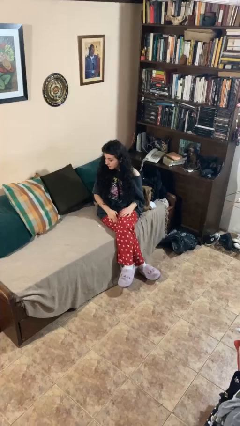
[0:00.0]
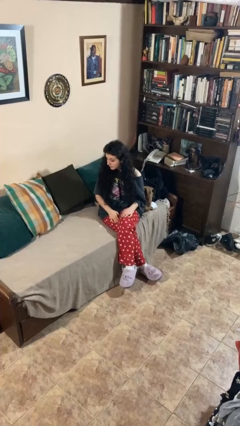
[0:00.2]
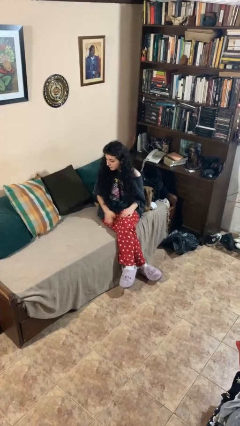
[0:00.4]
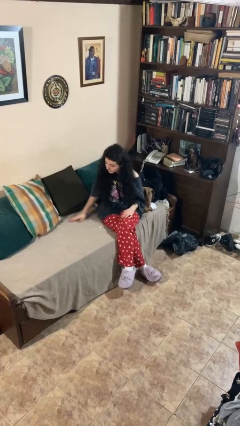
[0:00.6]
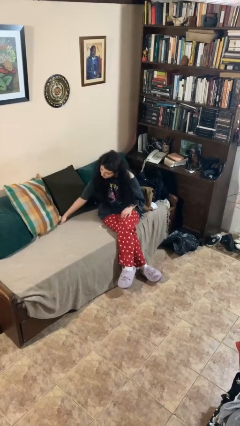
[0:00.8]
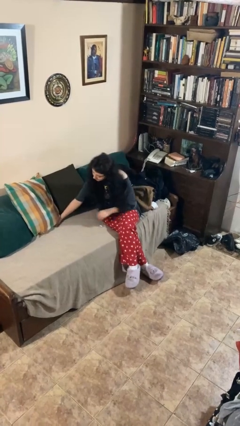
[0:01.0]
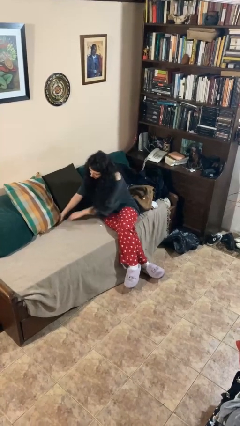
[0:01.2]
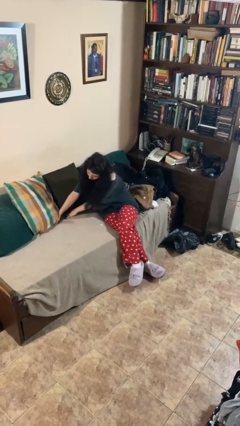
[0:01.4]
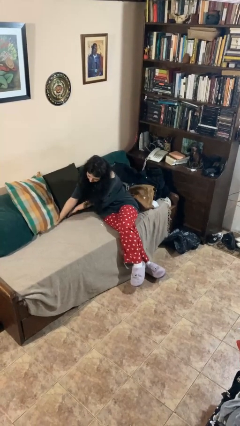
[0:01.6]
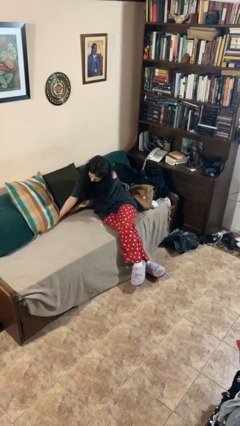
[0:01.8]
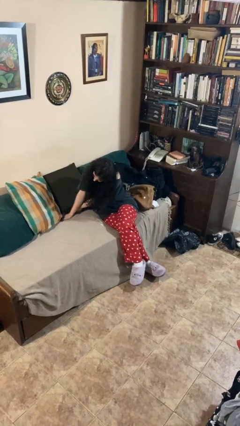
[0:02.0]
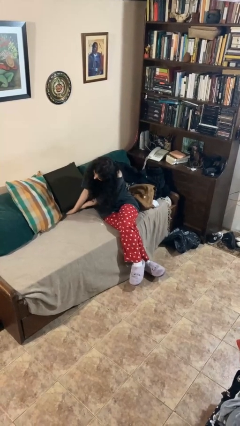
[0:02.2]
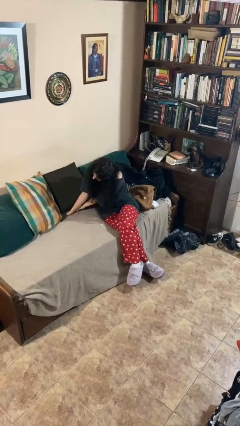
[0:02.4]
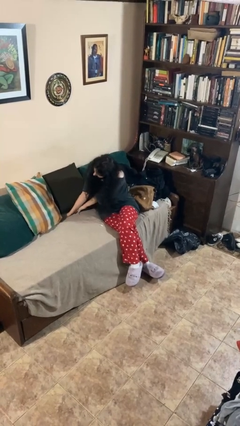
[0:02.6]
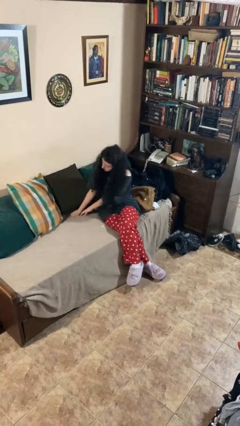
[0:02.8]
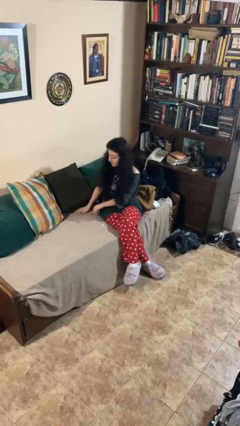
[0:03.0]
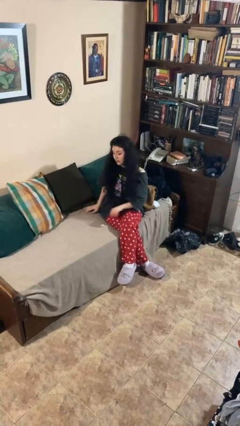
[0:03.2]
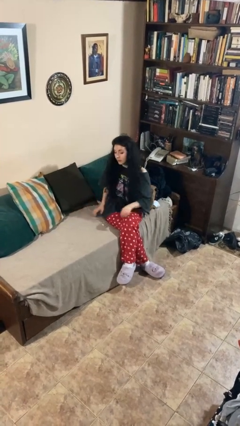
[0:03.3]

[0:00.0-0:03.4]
person searches in couch

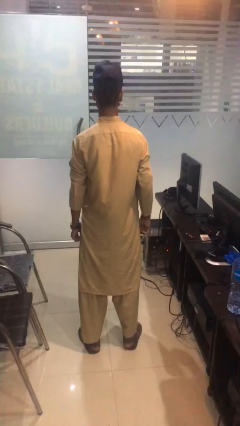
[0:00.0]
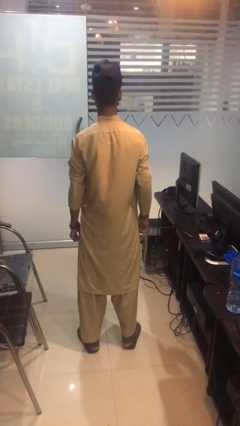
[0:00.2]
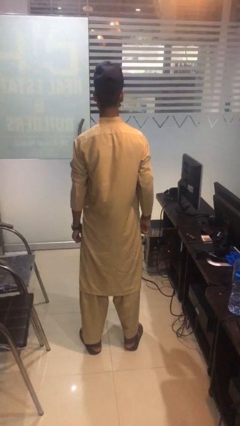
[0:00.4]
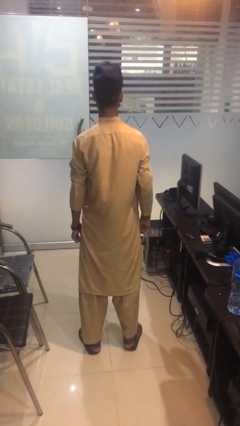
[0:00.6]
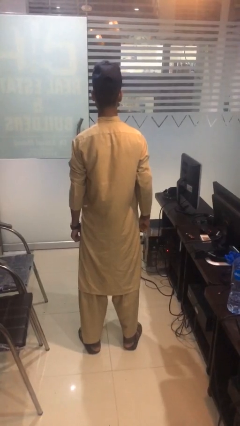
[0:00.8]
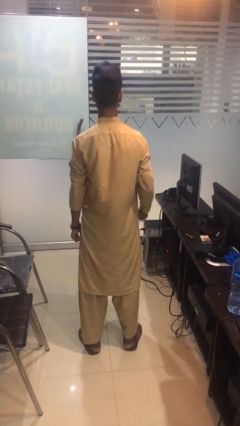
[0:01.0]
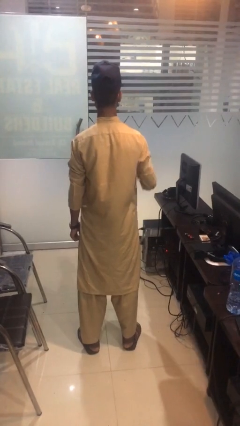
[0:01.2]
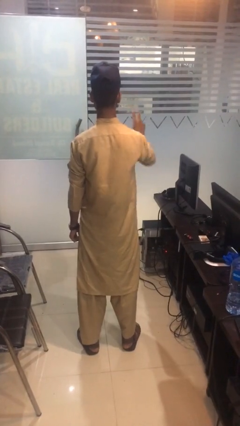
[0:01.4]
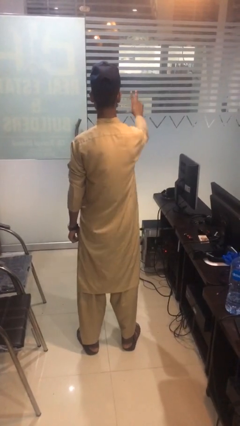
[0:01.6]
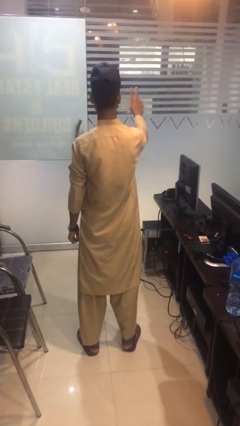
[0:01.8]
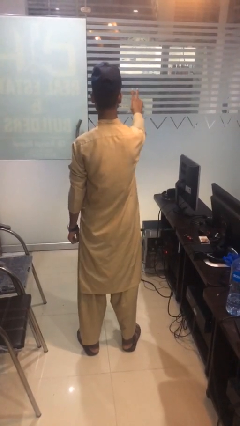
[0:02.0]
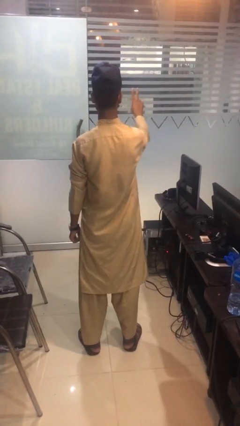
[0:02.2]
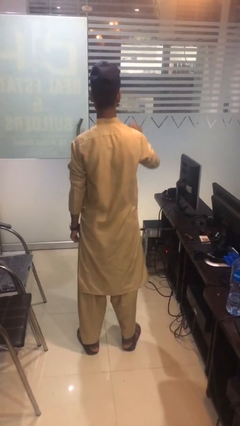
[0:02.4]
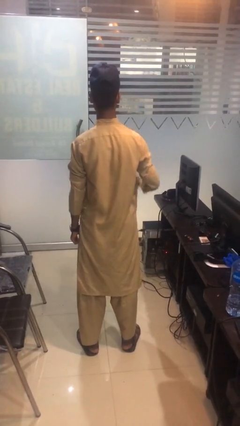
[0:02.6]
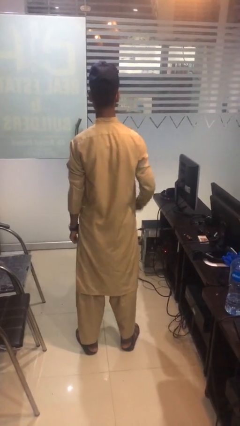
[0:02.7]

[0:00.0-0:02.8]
person gestures peace

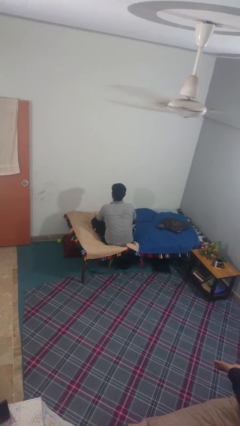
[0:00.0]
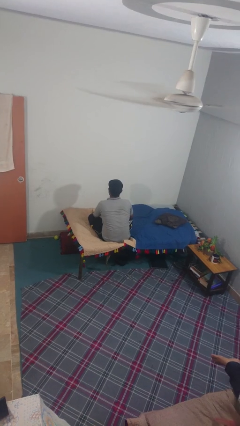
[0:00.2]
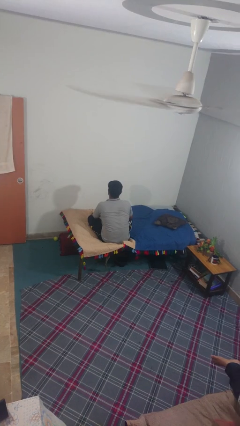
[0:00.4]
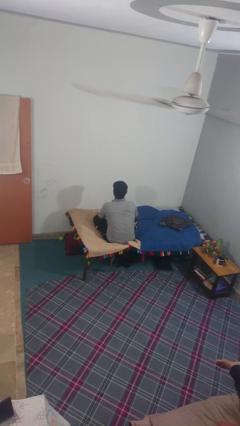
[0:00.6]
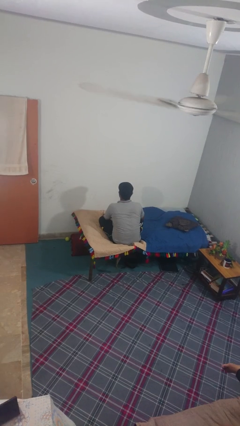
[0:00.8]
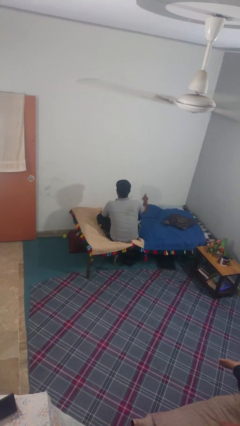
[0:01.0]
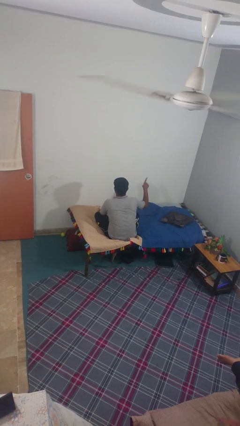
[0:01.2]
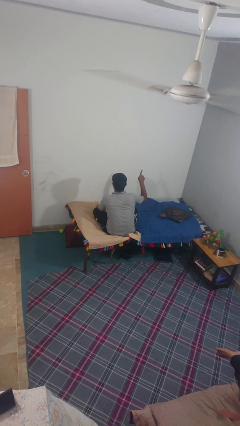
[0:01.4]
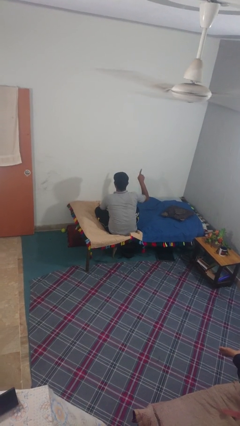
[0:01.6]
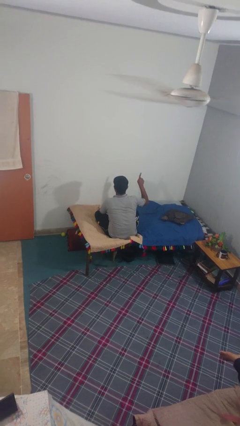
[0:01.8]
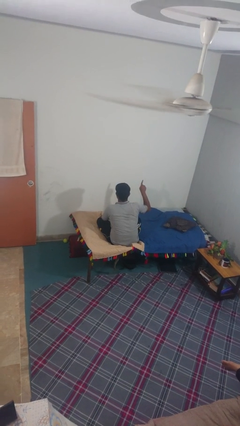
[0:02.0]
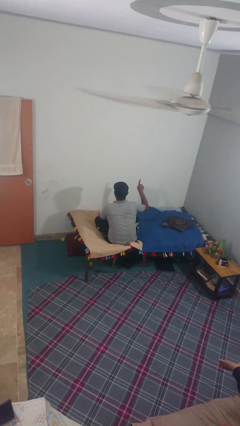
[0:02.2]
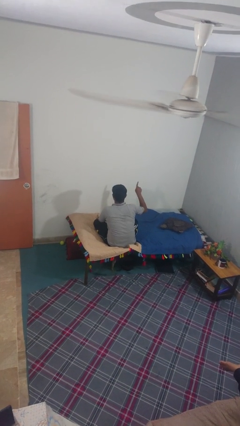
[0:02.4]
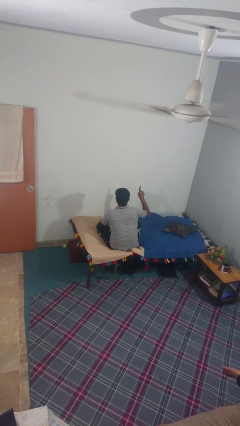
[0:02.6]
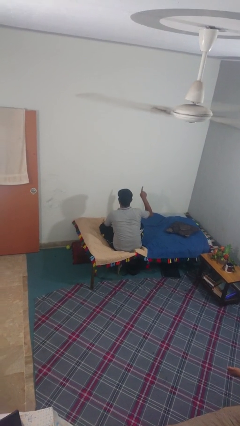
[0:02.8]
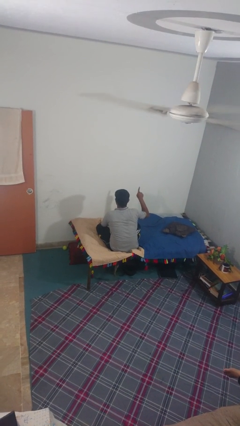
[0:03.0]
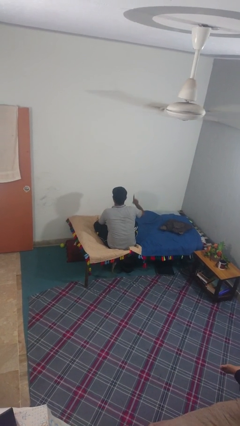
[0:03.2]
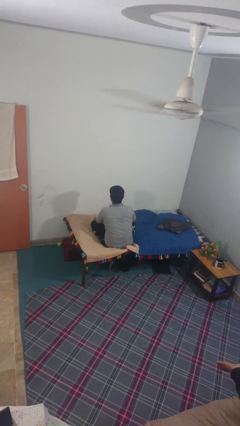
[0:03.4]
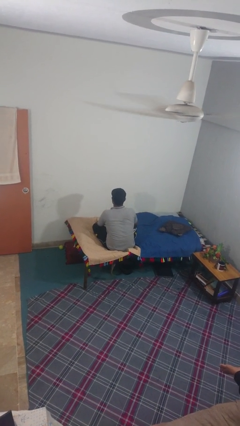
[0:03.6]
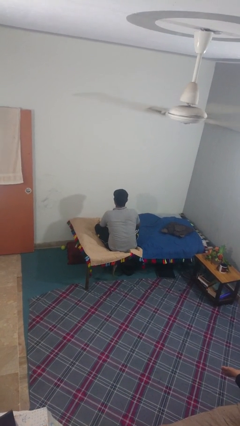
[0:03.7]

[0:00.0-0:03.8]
person gestures number one

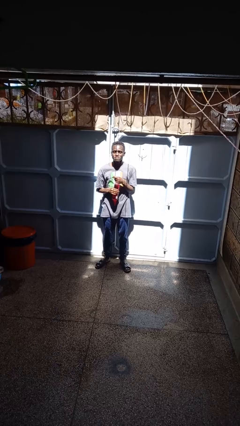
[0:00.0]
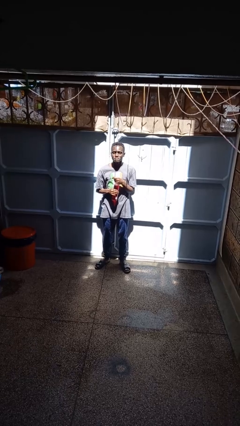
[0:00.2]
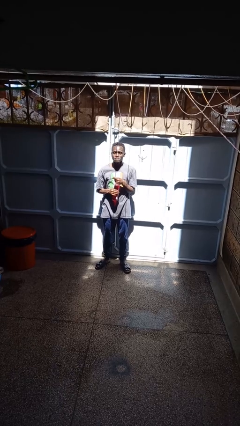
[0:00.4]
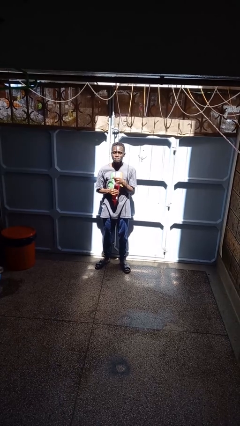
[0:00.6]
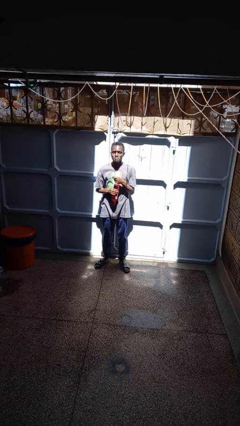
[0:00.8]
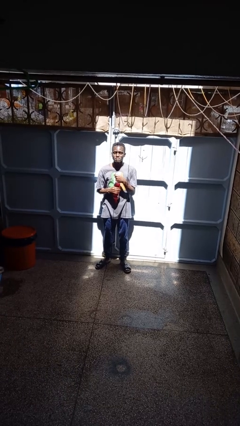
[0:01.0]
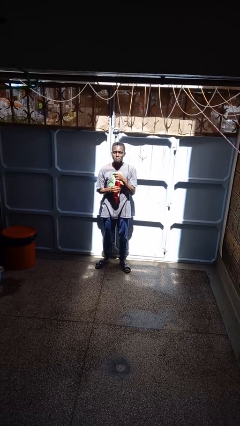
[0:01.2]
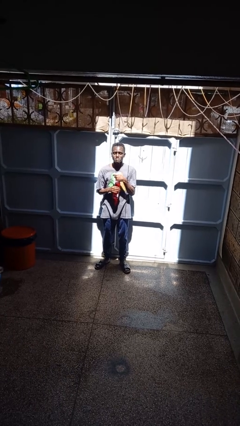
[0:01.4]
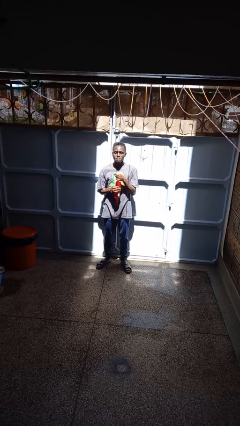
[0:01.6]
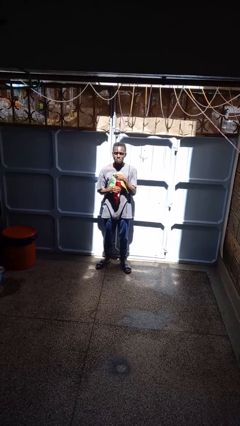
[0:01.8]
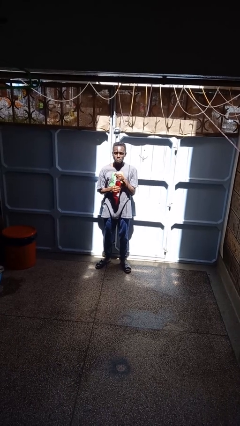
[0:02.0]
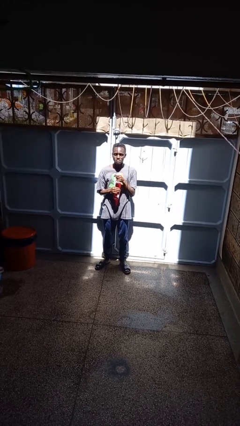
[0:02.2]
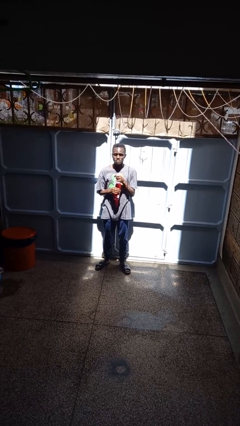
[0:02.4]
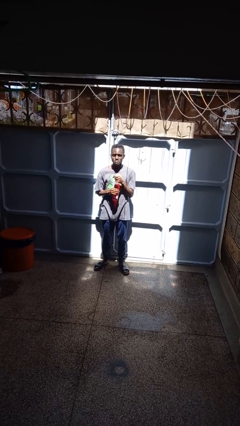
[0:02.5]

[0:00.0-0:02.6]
person opens beverage can

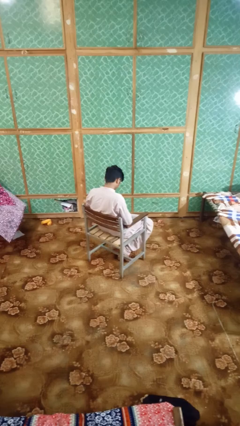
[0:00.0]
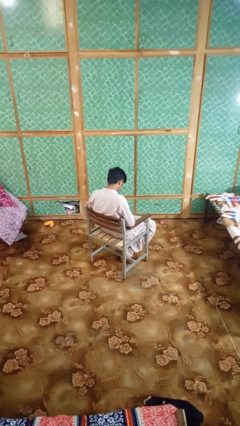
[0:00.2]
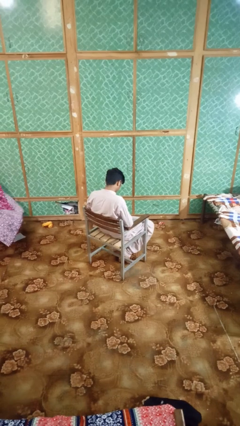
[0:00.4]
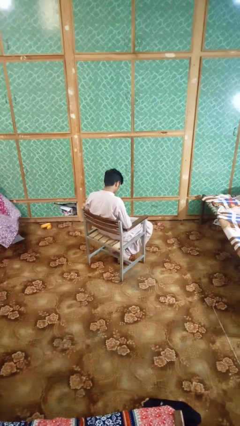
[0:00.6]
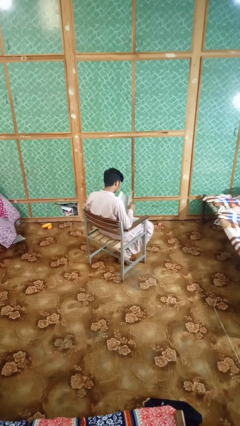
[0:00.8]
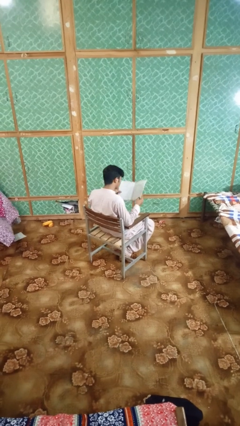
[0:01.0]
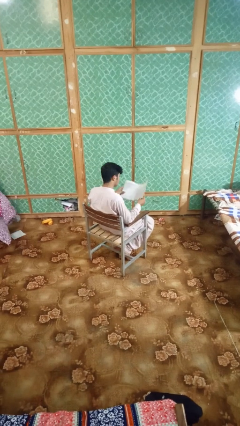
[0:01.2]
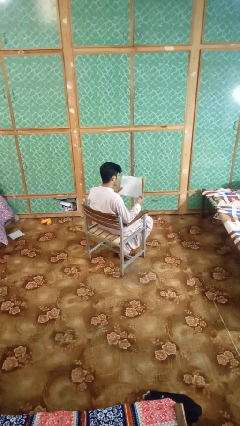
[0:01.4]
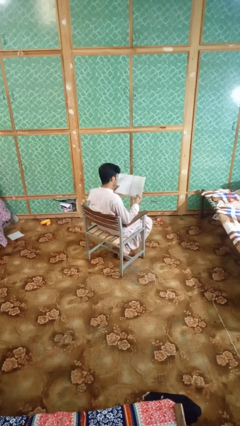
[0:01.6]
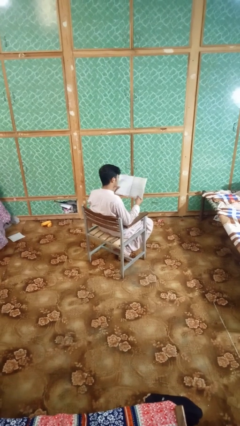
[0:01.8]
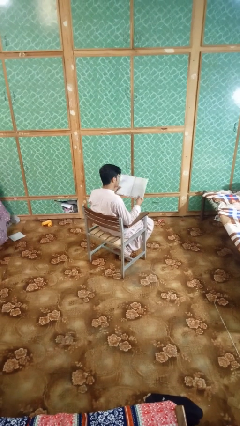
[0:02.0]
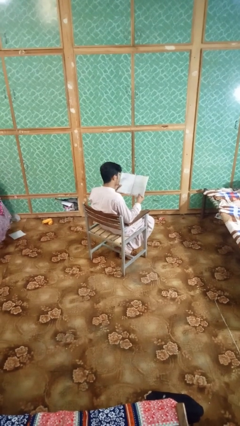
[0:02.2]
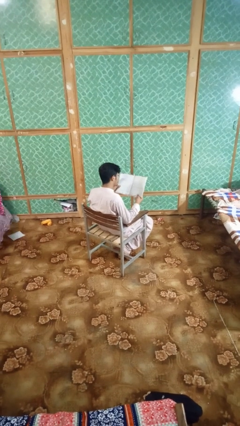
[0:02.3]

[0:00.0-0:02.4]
person reads book

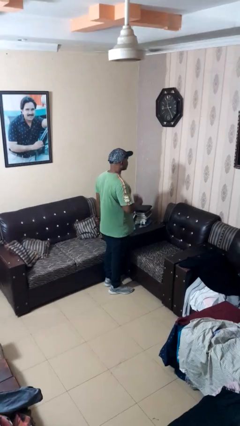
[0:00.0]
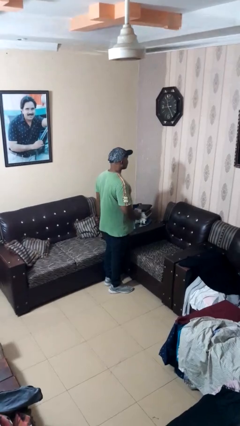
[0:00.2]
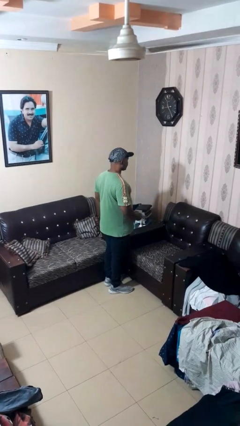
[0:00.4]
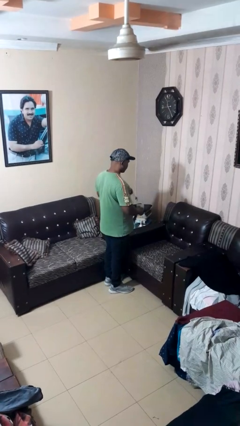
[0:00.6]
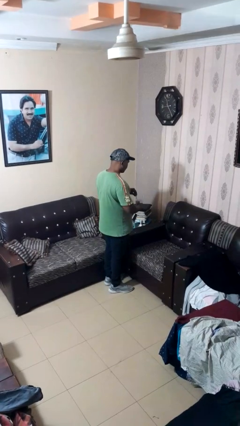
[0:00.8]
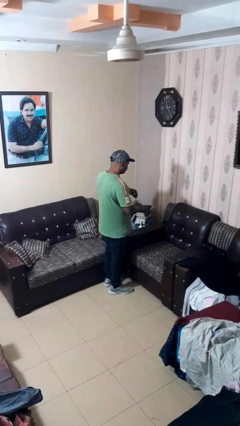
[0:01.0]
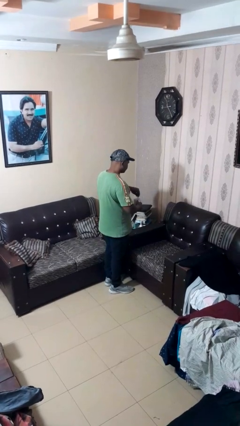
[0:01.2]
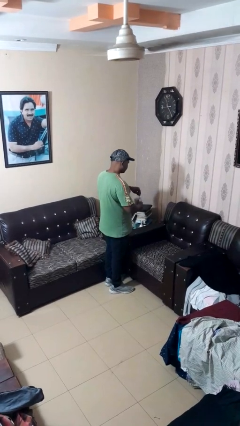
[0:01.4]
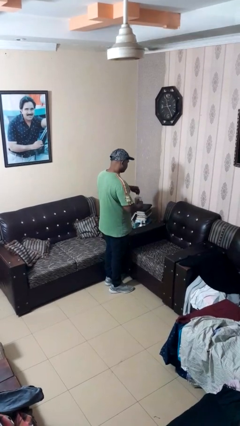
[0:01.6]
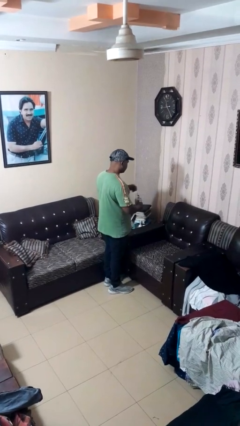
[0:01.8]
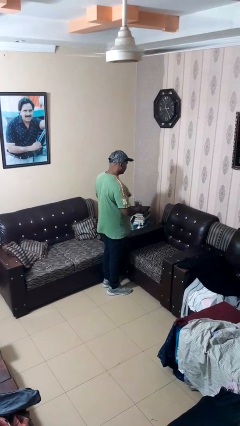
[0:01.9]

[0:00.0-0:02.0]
person stirs mug

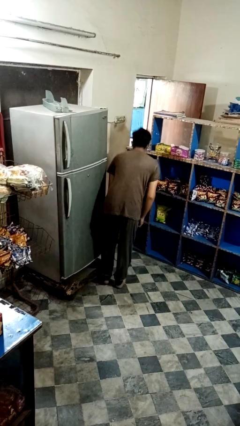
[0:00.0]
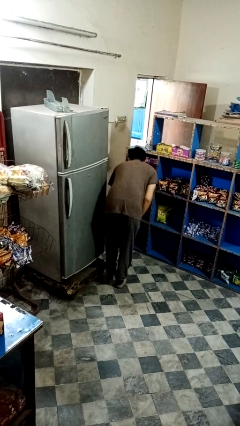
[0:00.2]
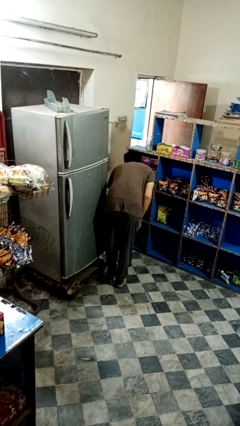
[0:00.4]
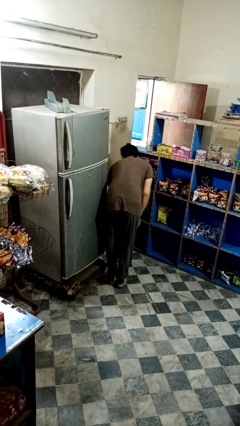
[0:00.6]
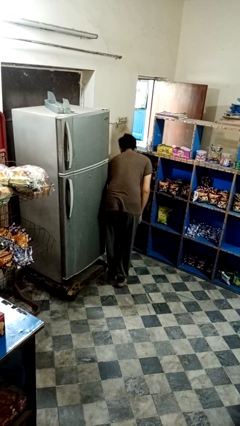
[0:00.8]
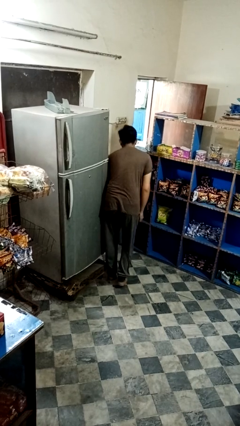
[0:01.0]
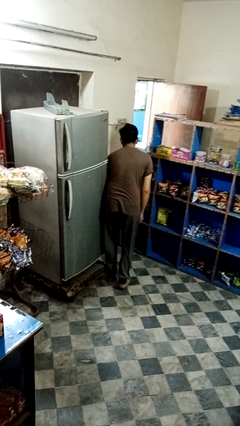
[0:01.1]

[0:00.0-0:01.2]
person stubs toe
